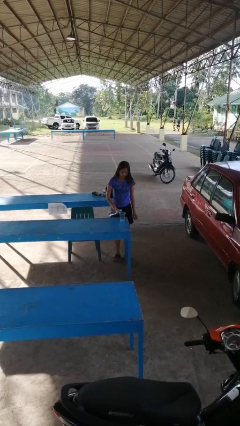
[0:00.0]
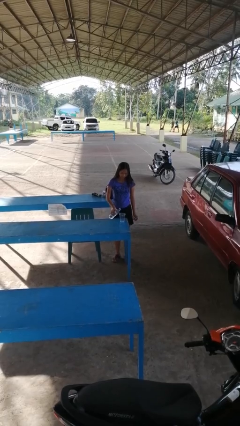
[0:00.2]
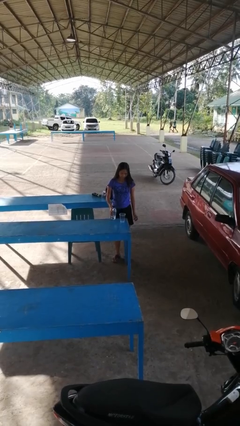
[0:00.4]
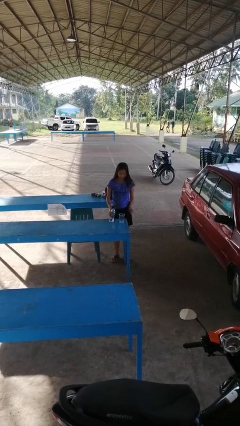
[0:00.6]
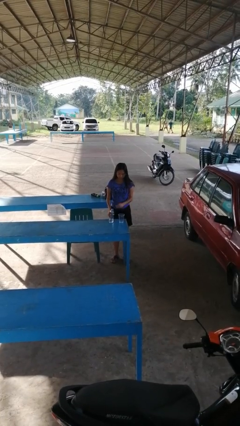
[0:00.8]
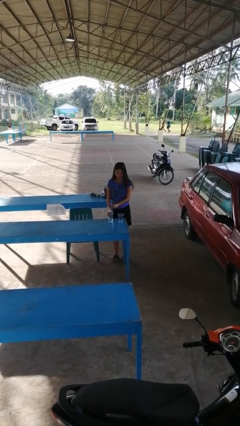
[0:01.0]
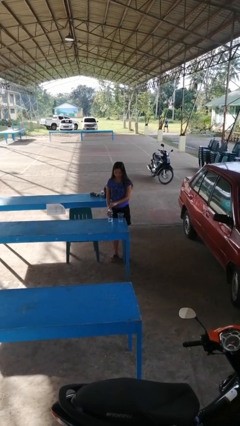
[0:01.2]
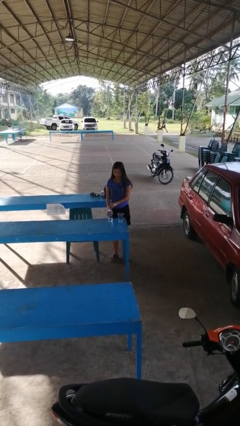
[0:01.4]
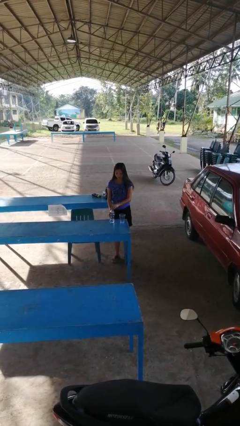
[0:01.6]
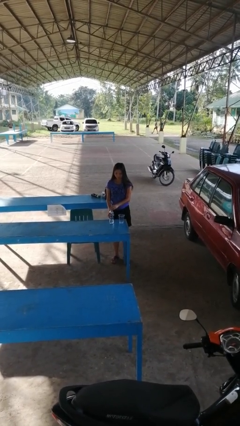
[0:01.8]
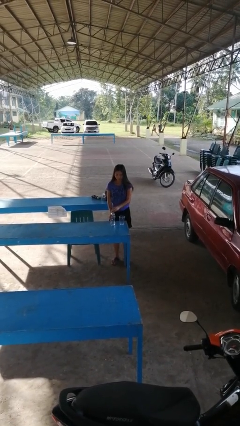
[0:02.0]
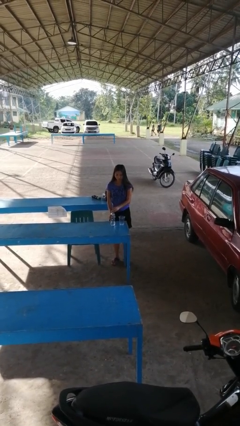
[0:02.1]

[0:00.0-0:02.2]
person screws lid to bottle

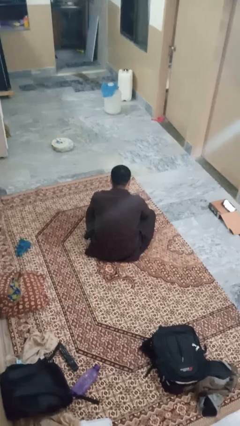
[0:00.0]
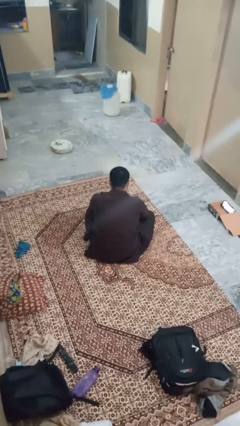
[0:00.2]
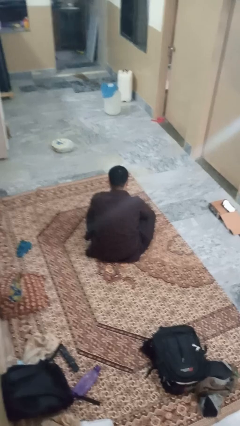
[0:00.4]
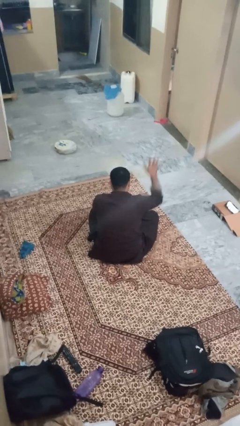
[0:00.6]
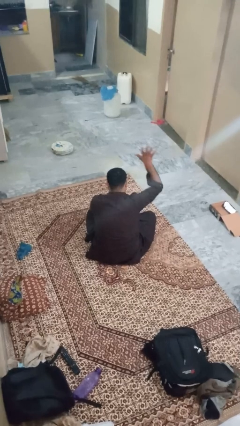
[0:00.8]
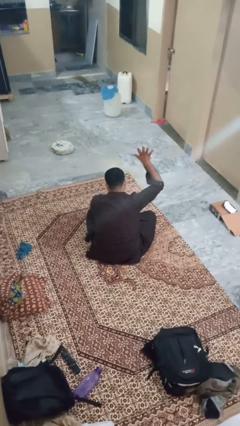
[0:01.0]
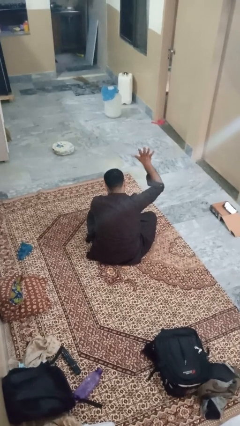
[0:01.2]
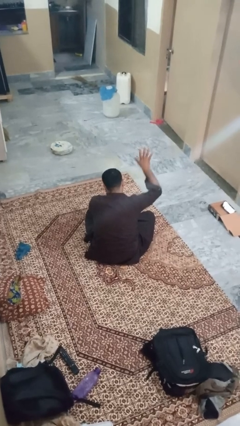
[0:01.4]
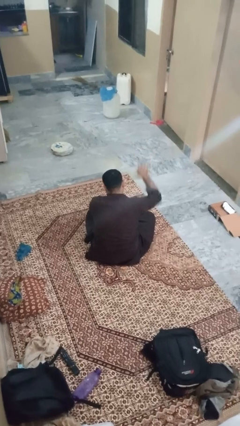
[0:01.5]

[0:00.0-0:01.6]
person gestures number five

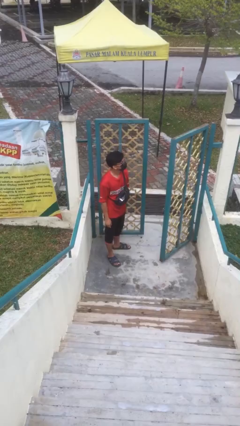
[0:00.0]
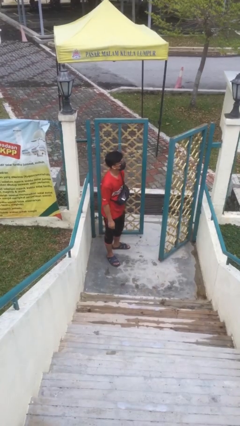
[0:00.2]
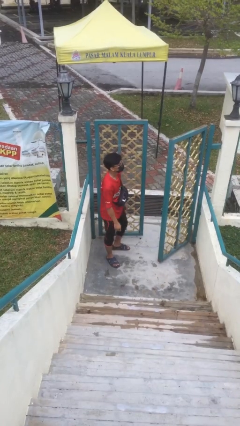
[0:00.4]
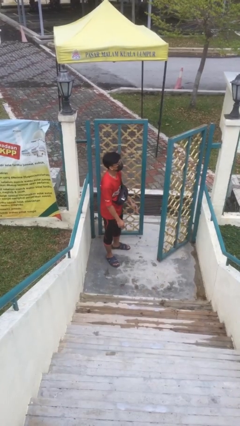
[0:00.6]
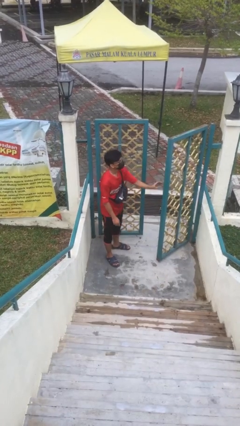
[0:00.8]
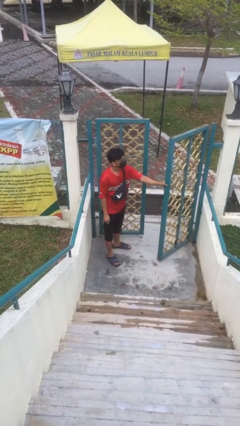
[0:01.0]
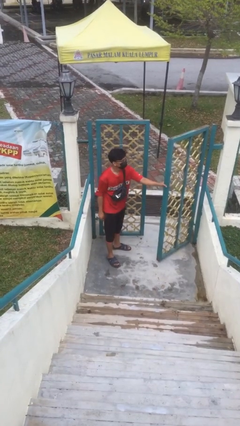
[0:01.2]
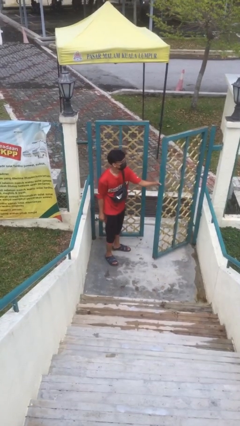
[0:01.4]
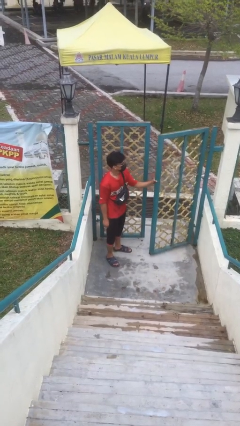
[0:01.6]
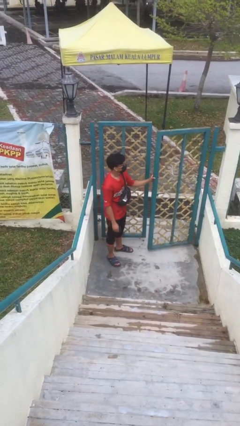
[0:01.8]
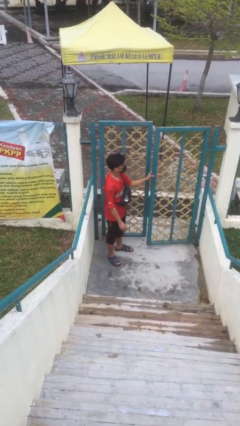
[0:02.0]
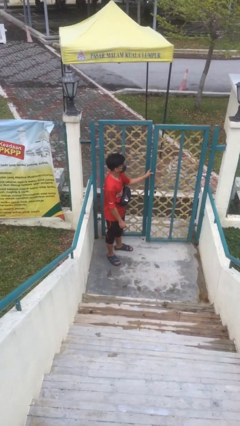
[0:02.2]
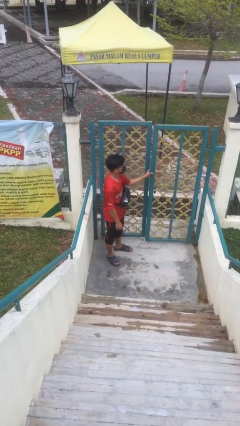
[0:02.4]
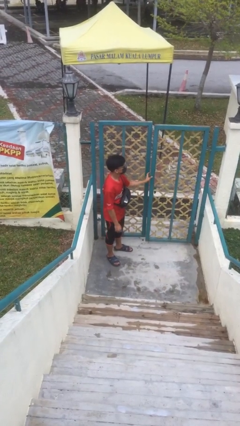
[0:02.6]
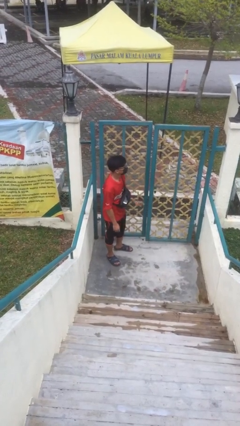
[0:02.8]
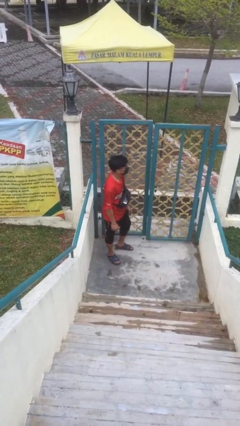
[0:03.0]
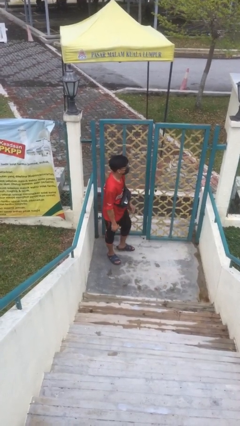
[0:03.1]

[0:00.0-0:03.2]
person closes facility door

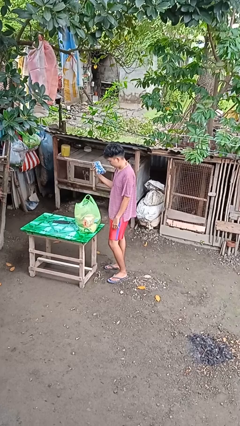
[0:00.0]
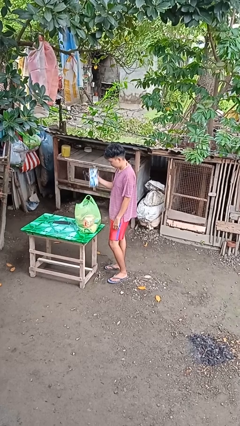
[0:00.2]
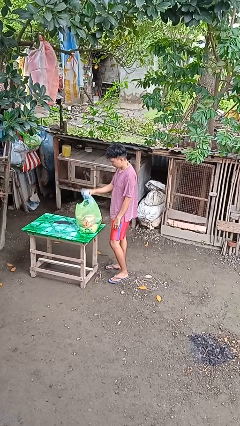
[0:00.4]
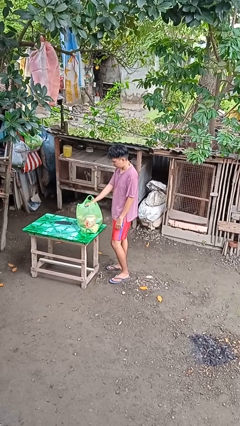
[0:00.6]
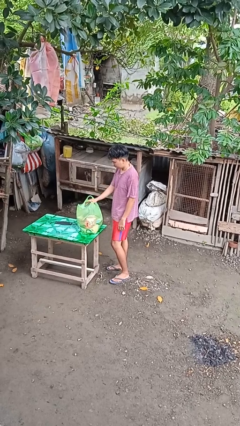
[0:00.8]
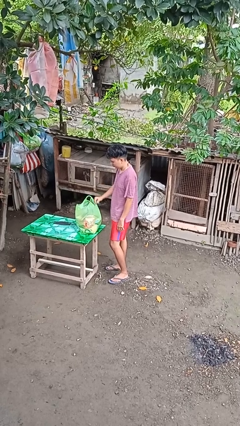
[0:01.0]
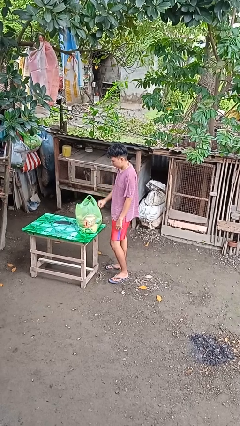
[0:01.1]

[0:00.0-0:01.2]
person puts object into bag

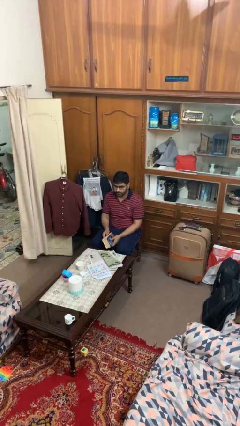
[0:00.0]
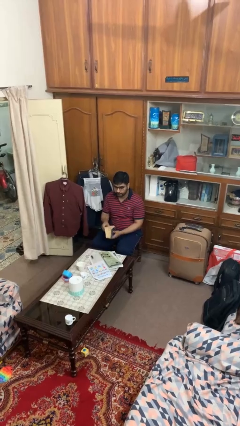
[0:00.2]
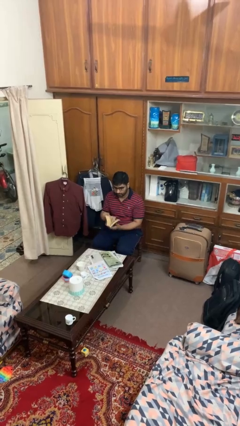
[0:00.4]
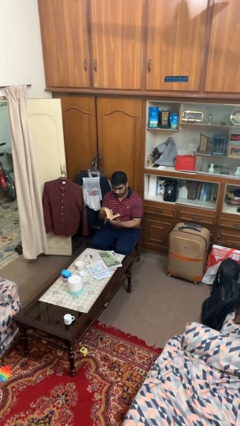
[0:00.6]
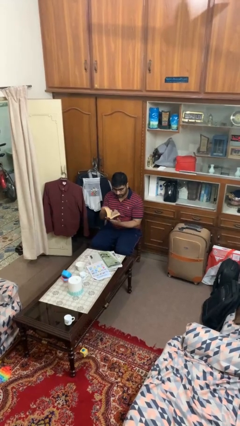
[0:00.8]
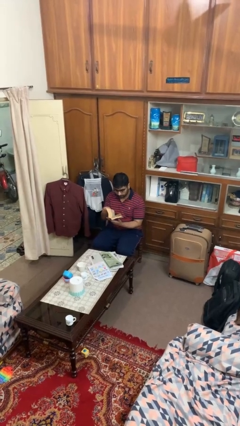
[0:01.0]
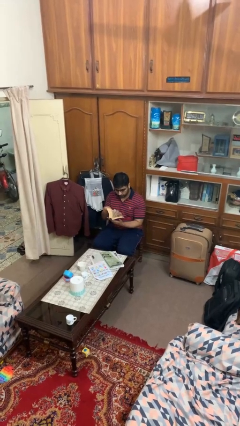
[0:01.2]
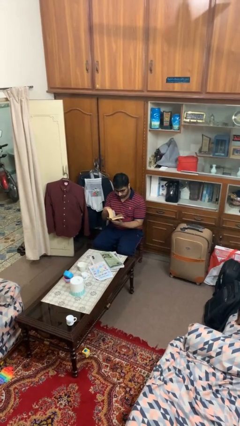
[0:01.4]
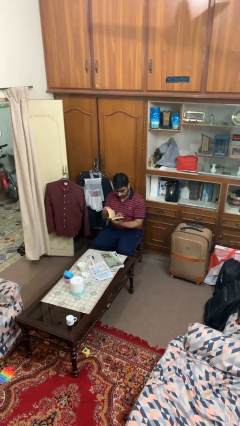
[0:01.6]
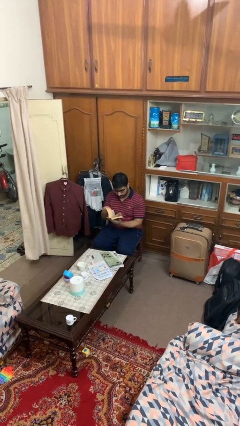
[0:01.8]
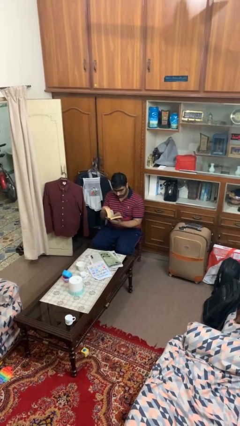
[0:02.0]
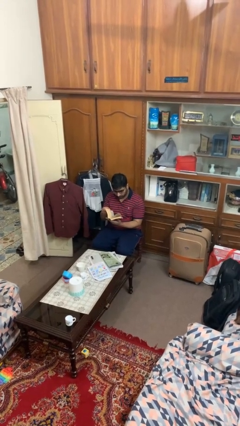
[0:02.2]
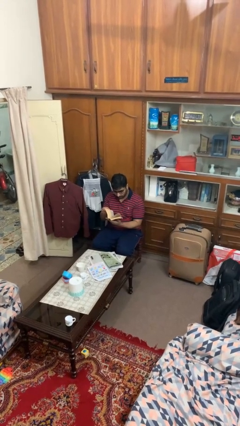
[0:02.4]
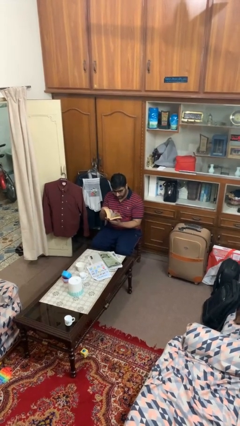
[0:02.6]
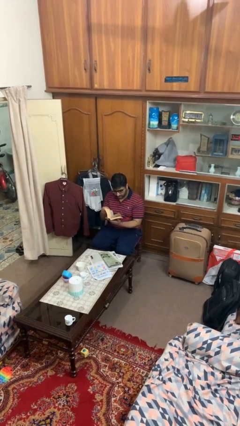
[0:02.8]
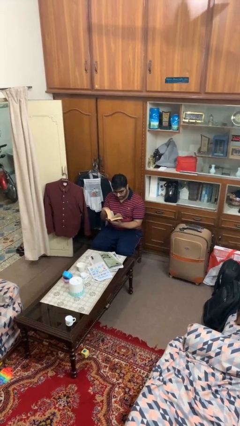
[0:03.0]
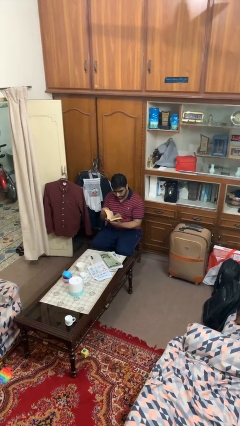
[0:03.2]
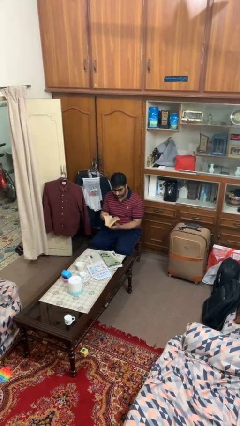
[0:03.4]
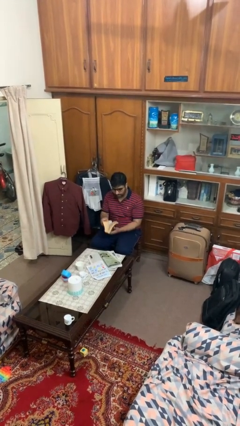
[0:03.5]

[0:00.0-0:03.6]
person reads book

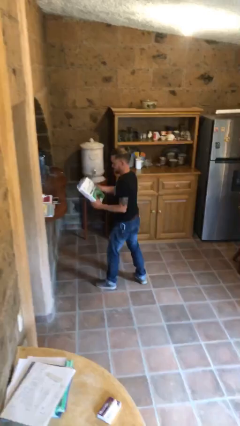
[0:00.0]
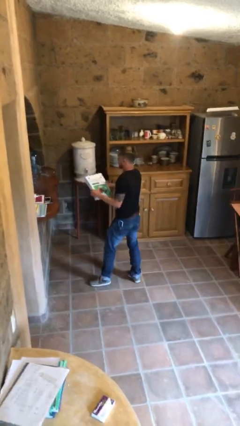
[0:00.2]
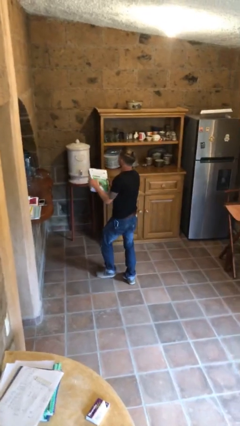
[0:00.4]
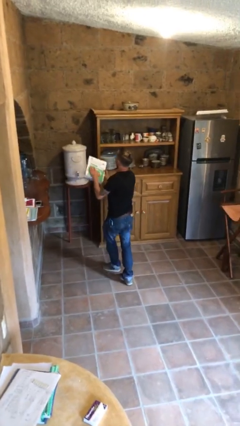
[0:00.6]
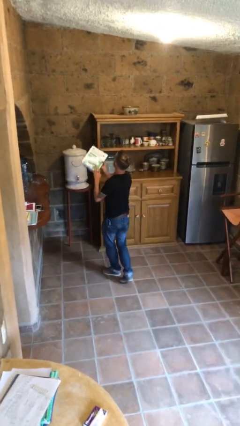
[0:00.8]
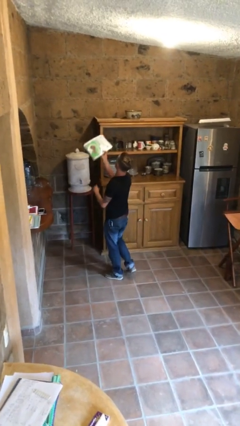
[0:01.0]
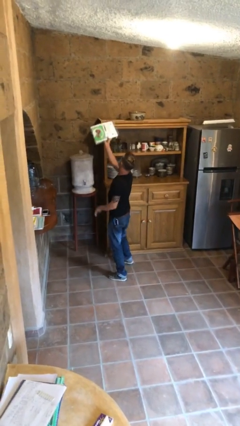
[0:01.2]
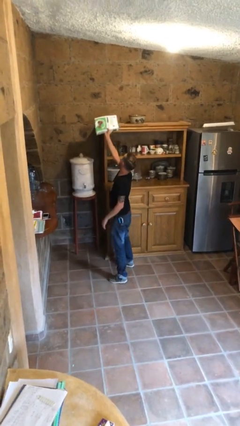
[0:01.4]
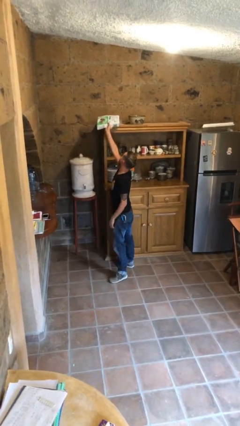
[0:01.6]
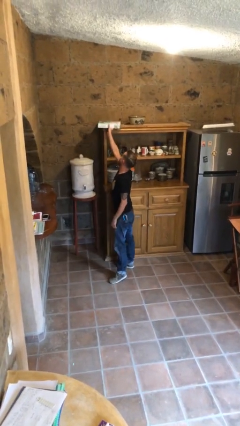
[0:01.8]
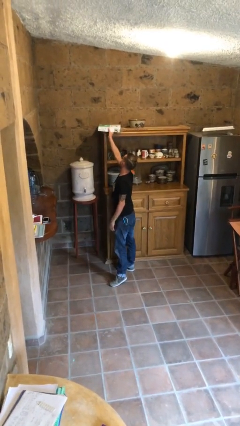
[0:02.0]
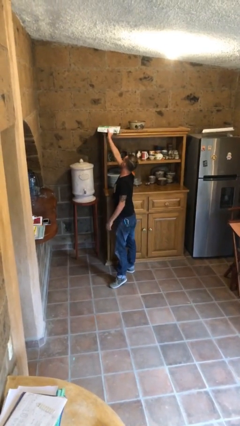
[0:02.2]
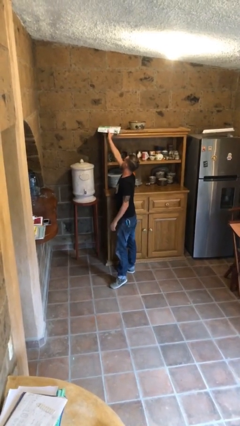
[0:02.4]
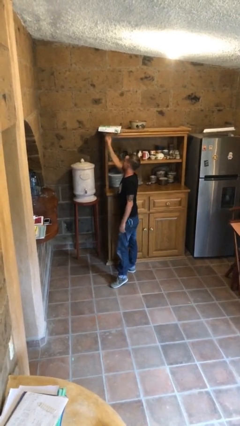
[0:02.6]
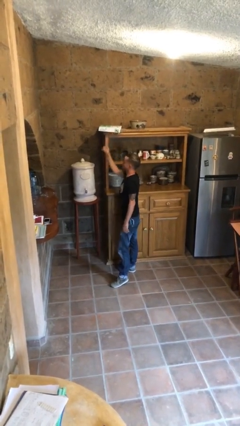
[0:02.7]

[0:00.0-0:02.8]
person puts down object on shelf

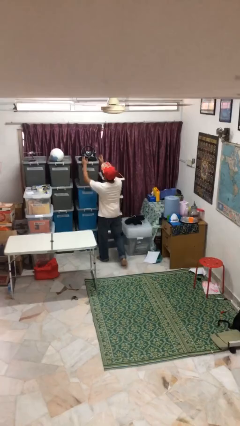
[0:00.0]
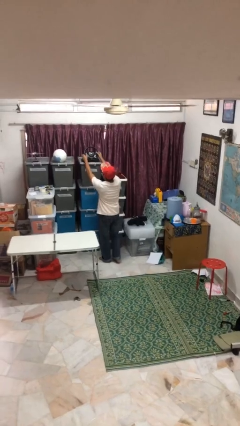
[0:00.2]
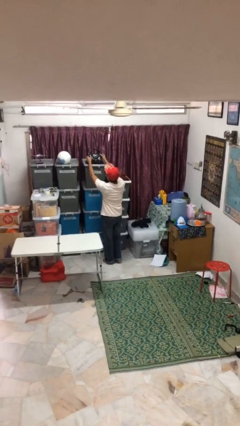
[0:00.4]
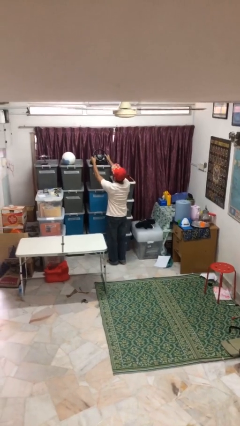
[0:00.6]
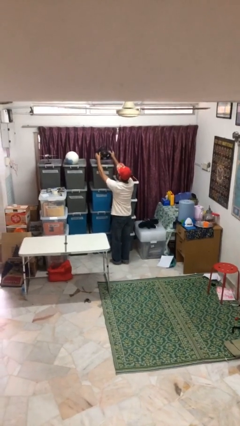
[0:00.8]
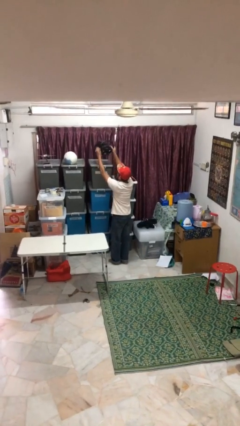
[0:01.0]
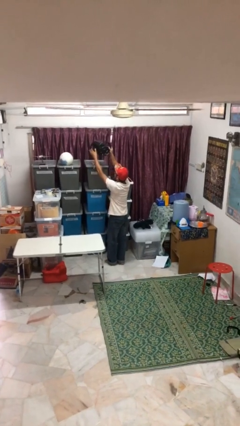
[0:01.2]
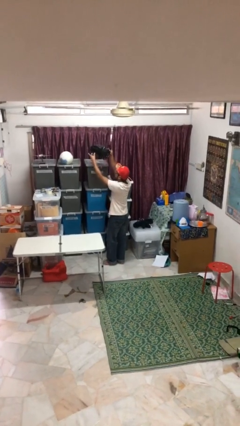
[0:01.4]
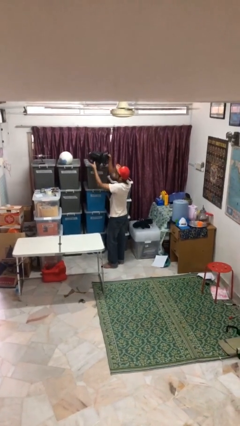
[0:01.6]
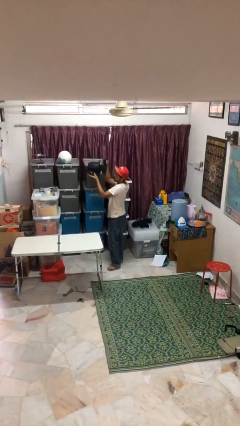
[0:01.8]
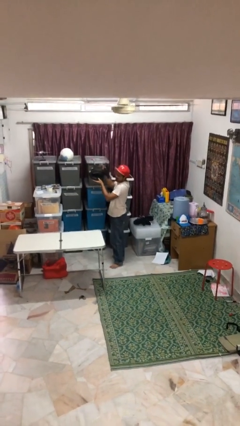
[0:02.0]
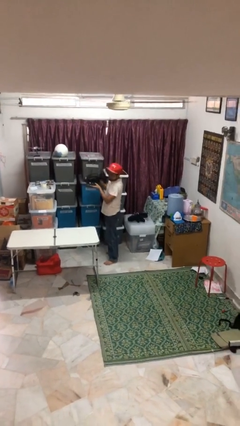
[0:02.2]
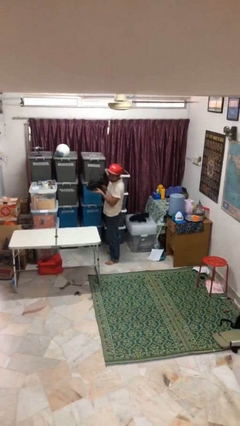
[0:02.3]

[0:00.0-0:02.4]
person picks up object from shelf

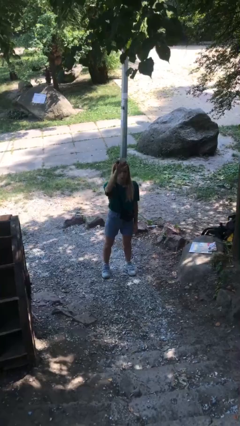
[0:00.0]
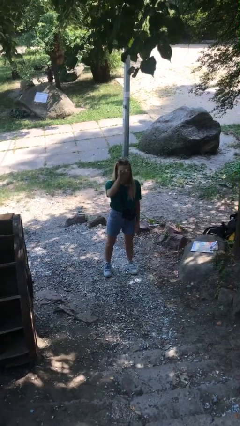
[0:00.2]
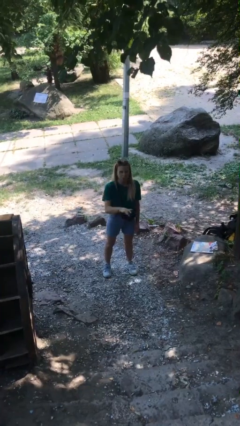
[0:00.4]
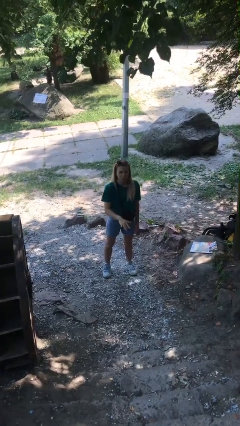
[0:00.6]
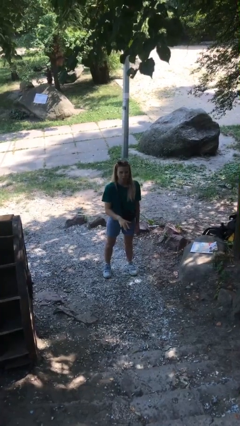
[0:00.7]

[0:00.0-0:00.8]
person gestures swipe down
